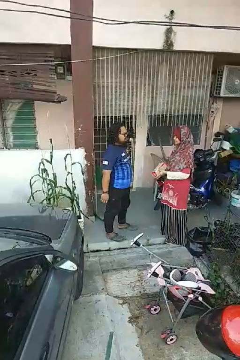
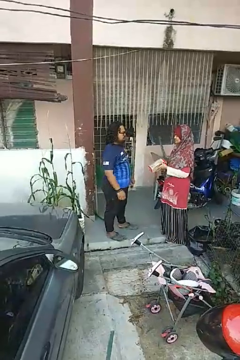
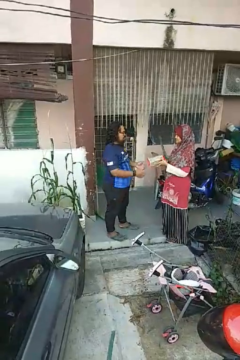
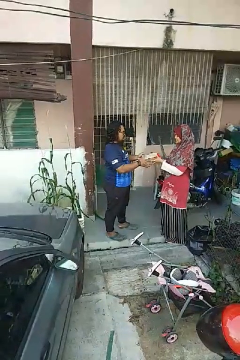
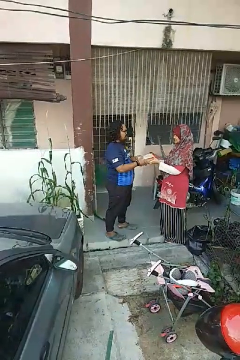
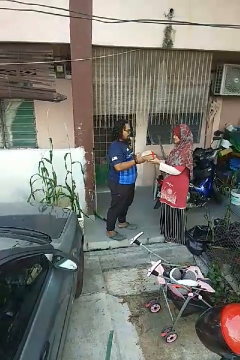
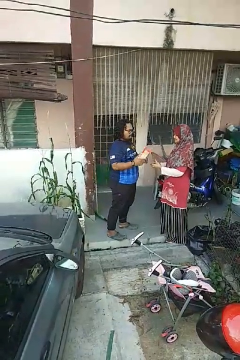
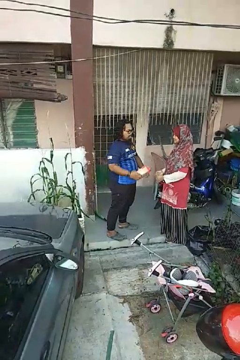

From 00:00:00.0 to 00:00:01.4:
person transfers object to person

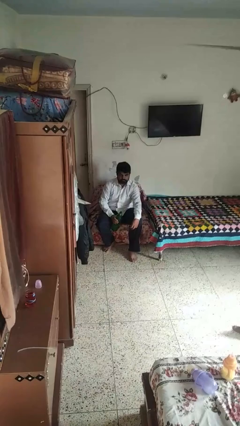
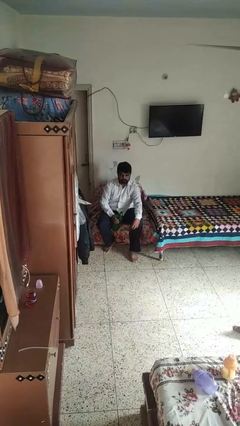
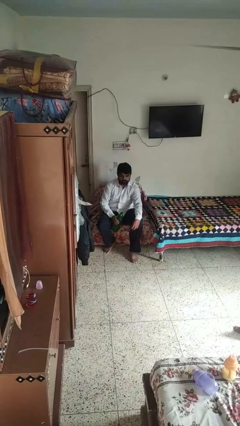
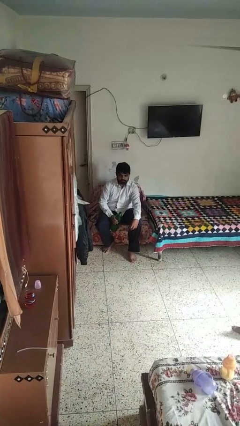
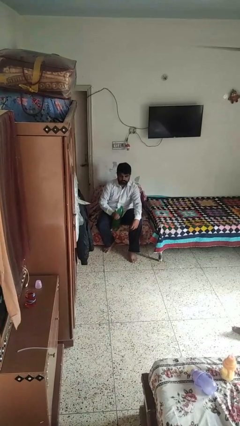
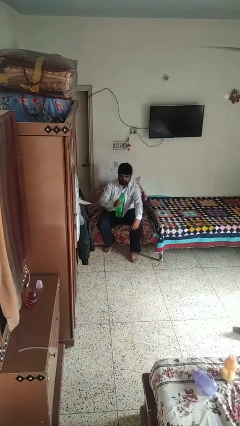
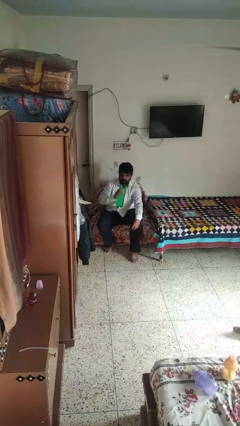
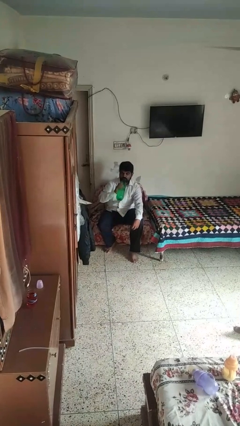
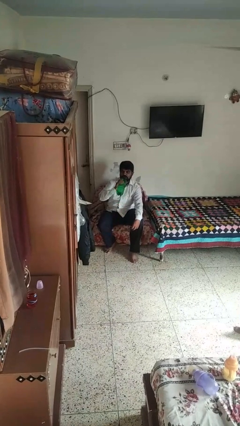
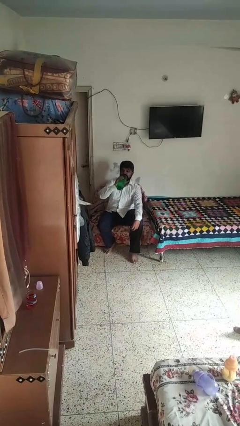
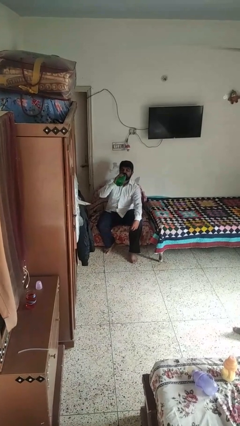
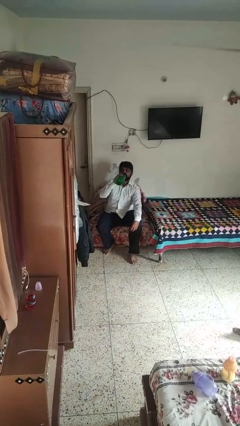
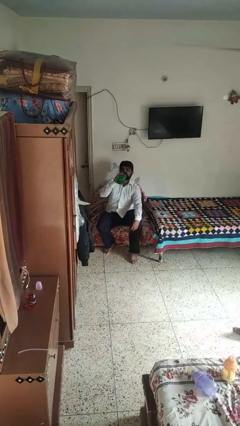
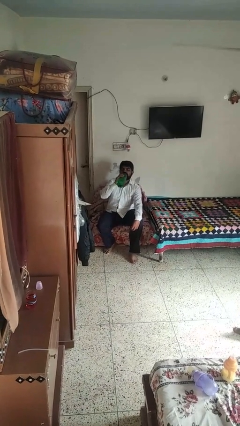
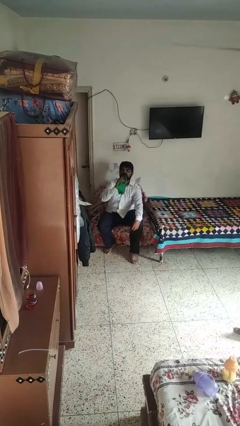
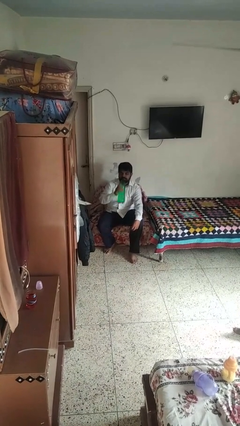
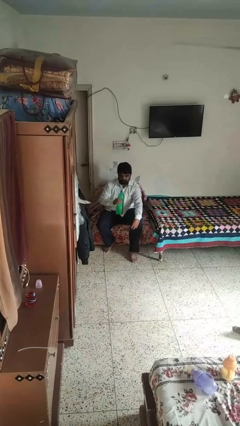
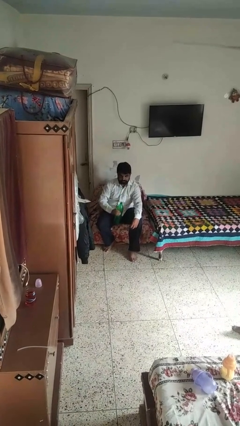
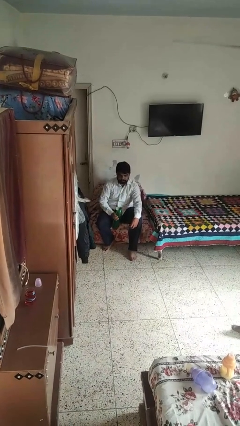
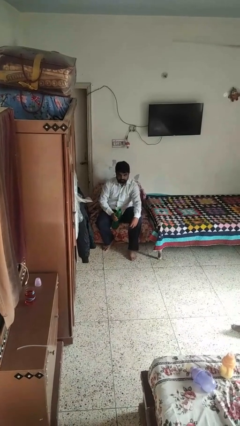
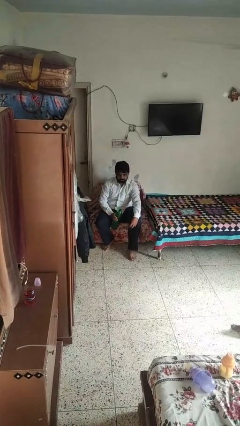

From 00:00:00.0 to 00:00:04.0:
person drinks from bottle

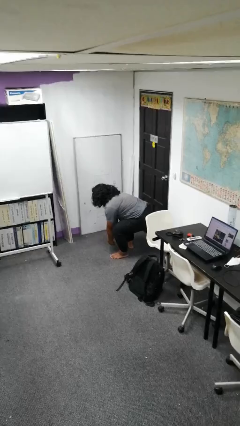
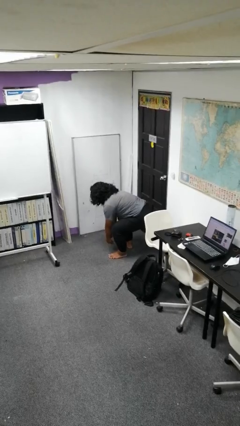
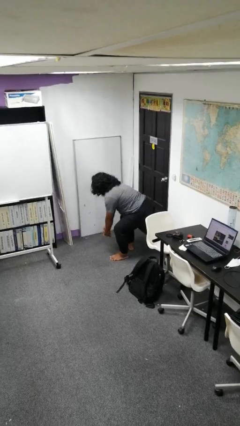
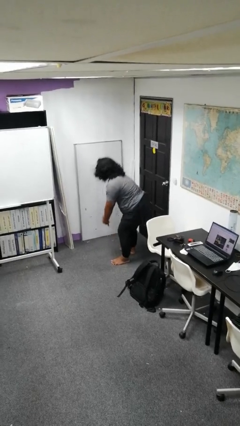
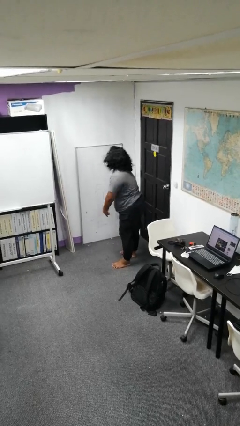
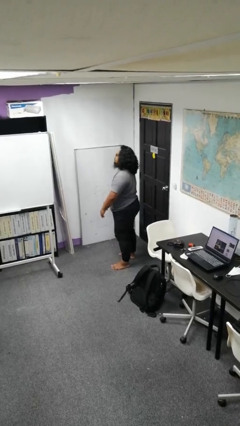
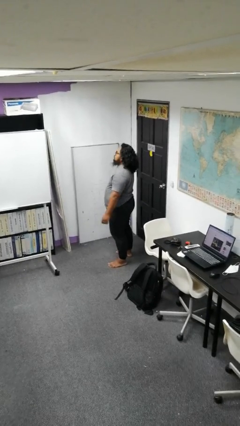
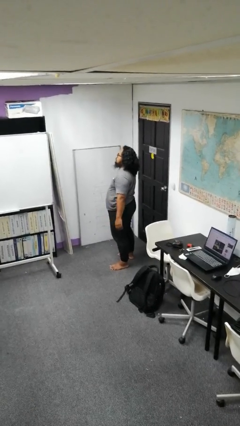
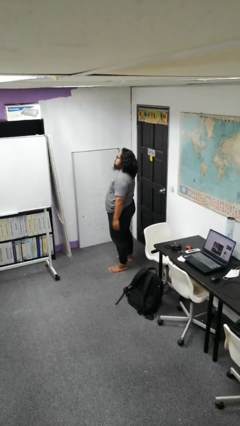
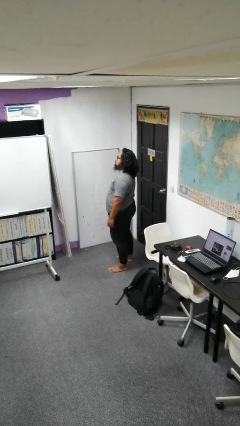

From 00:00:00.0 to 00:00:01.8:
person stands up

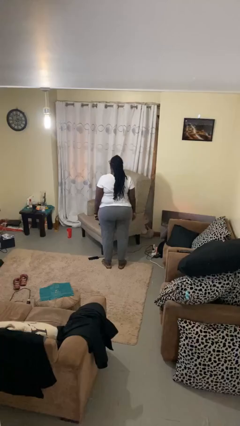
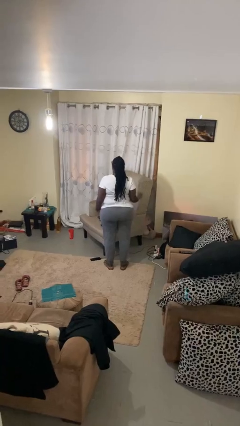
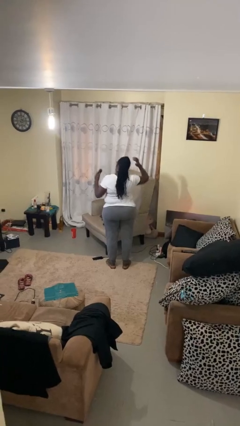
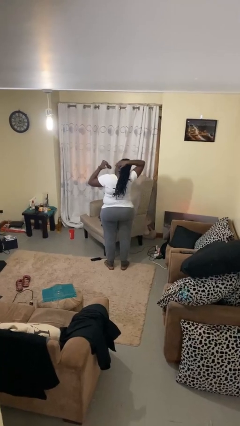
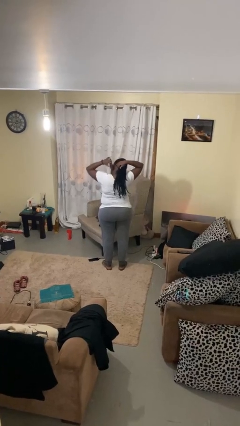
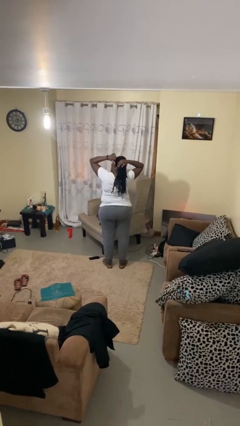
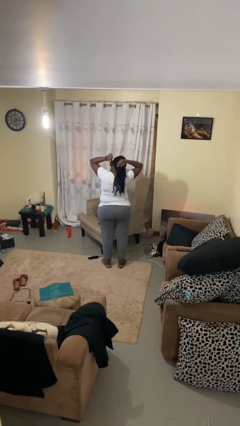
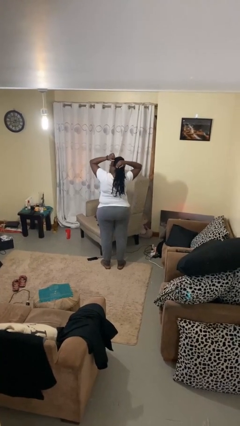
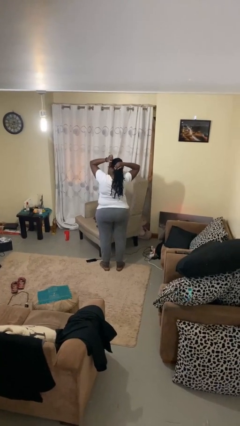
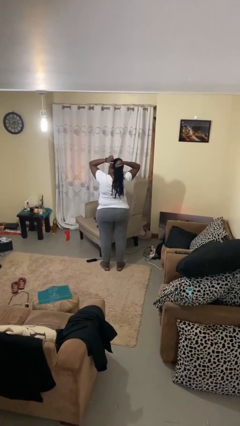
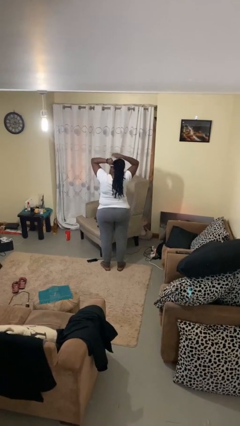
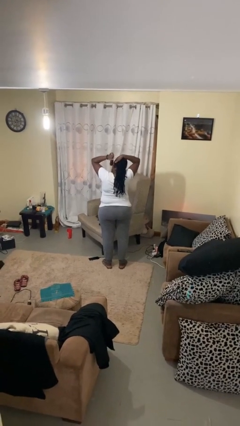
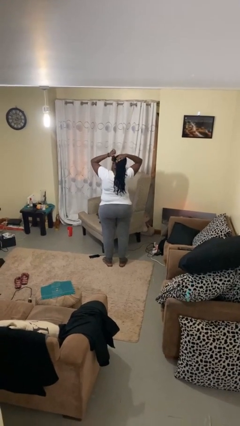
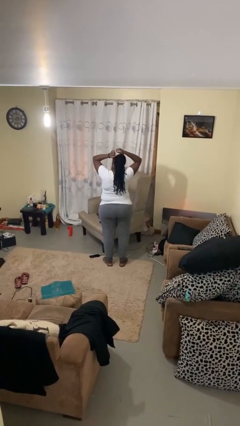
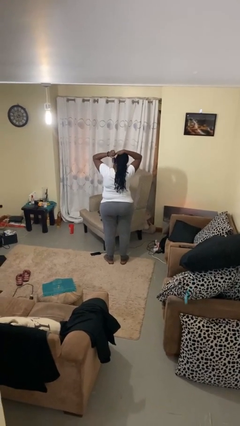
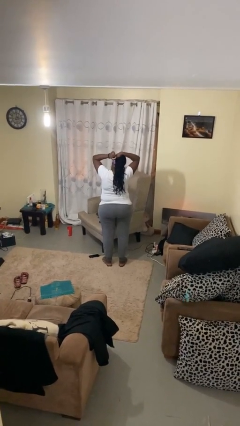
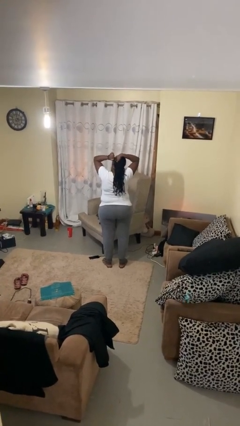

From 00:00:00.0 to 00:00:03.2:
person brushes hair

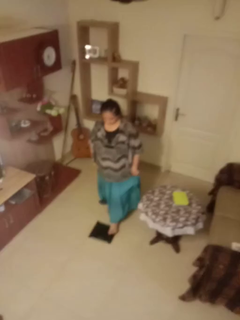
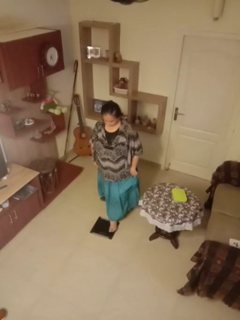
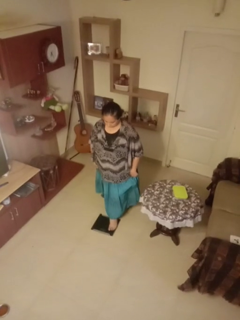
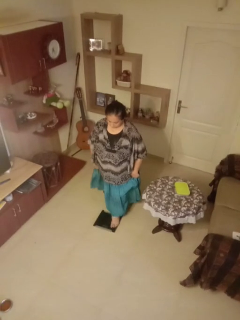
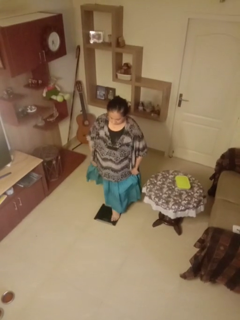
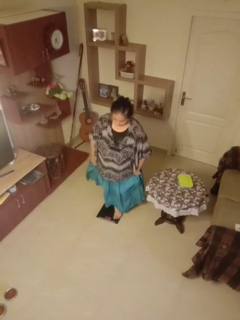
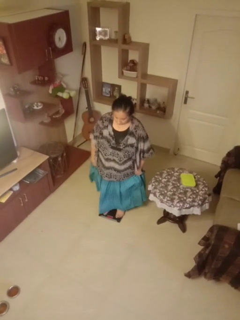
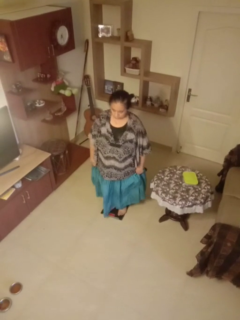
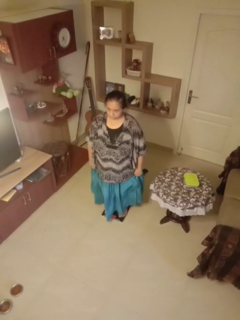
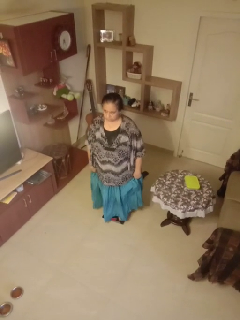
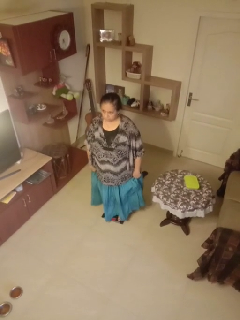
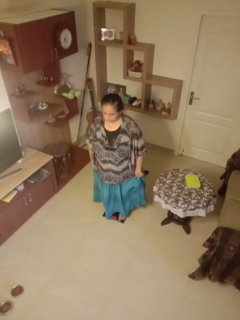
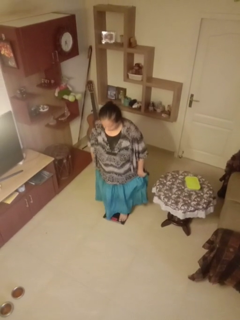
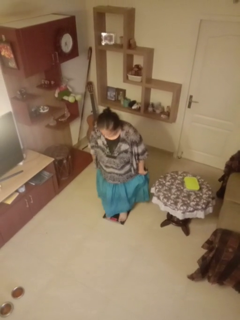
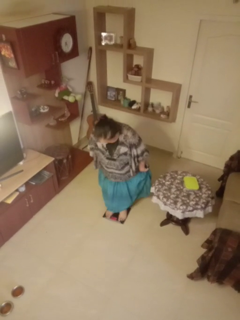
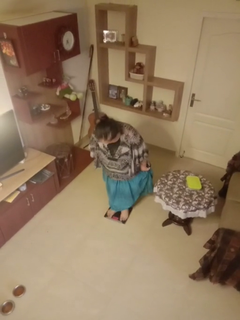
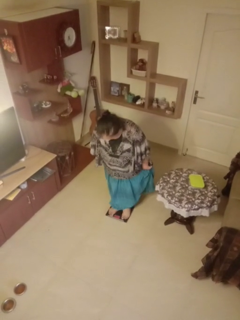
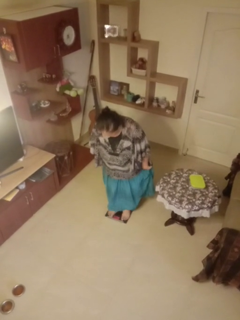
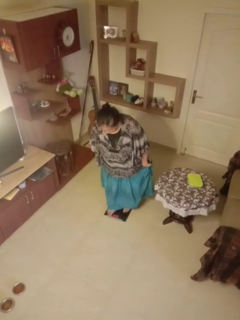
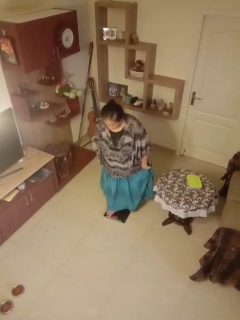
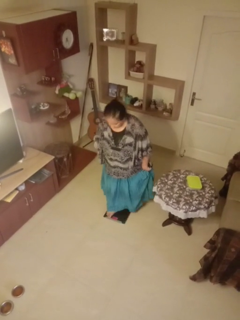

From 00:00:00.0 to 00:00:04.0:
person uses bodyweight scale

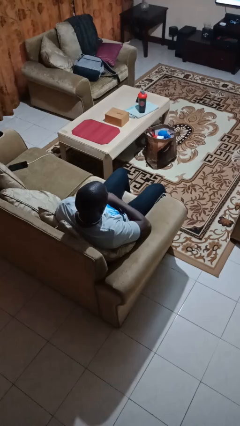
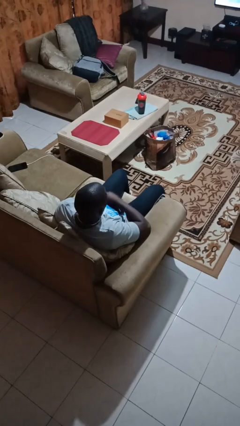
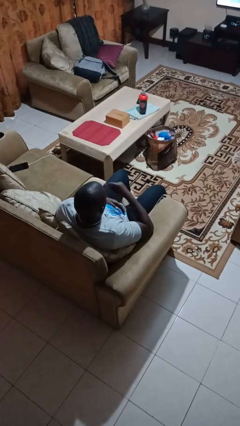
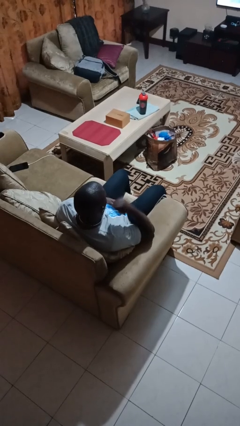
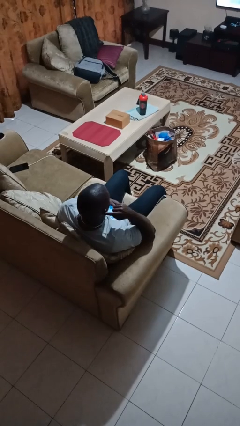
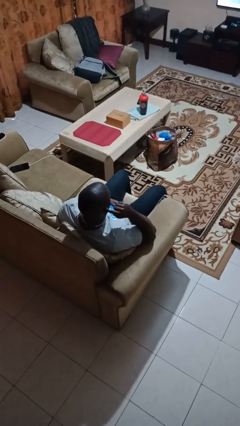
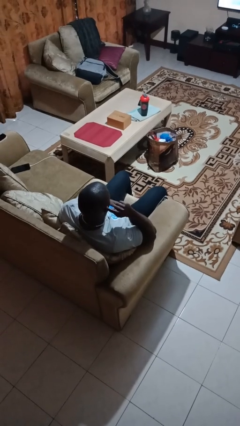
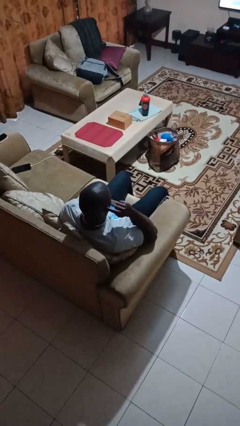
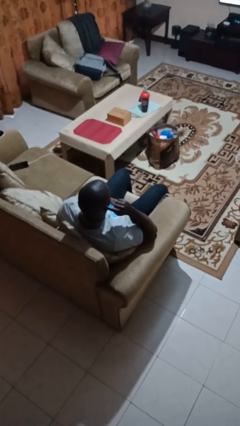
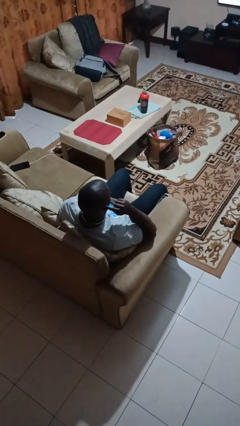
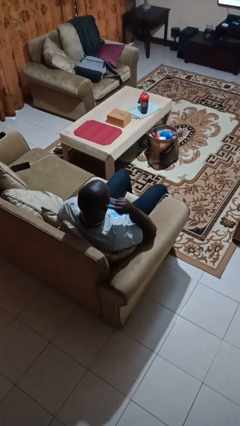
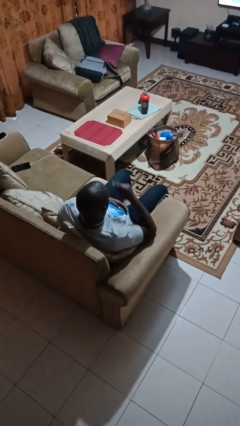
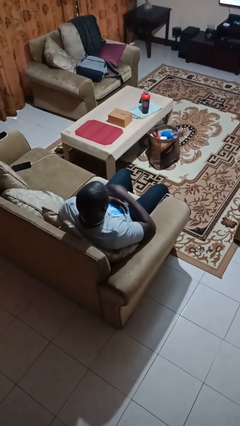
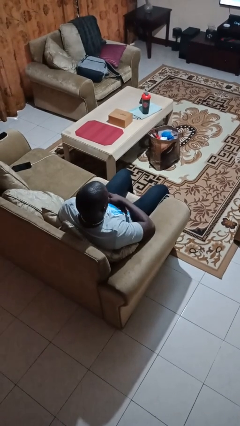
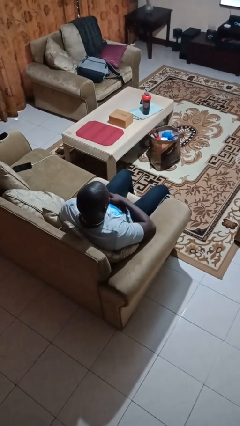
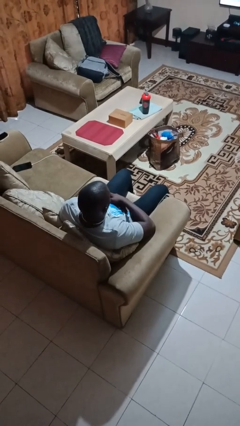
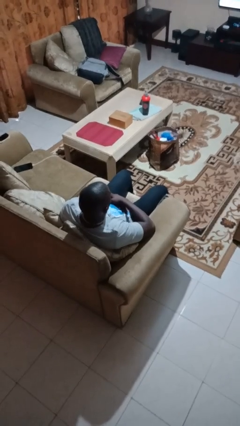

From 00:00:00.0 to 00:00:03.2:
person gestures listen closely

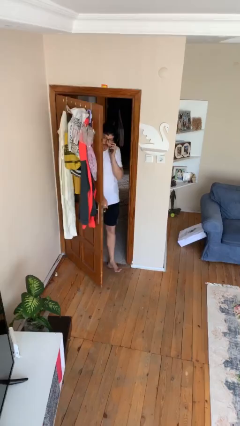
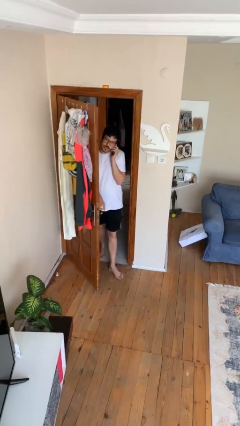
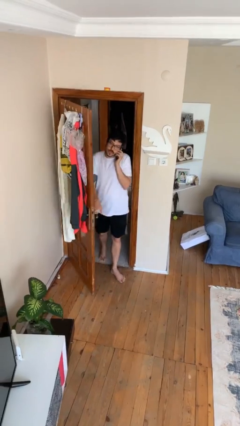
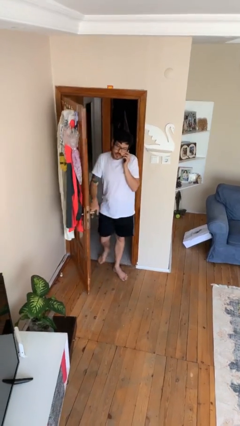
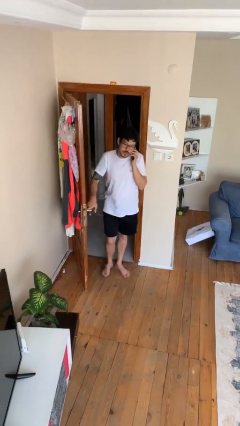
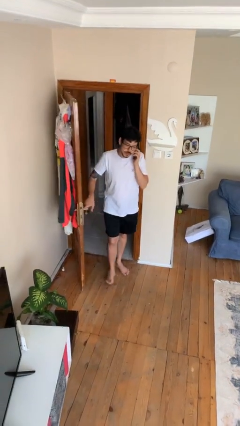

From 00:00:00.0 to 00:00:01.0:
person opens facility door
